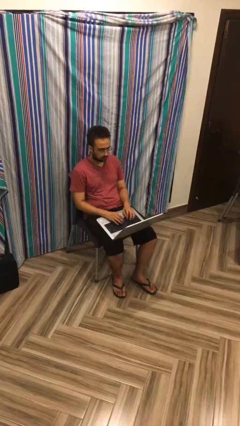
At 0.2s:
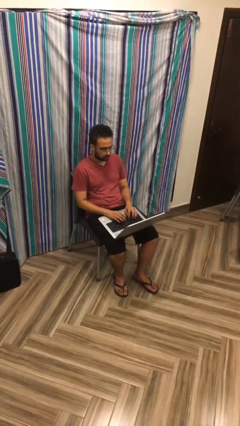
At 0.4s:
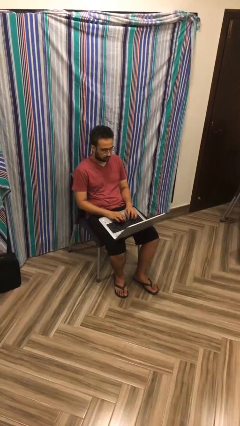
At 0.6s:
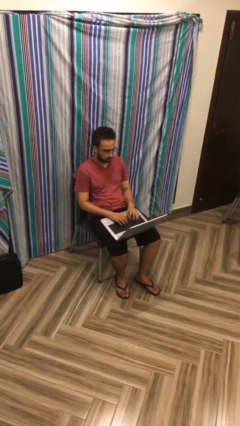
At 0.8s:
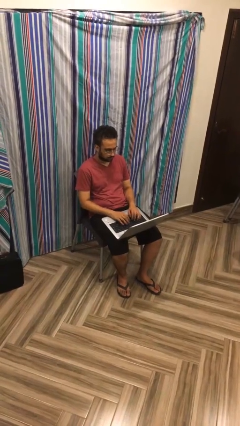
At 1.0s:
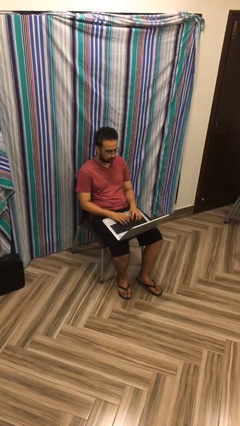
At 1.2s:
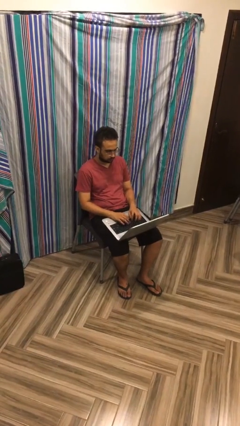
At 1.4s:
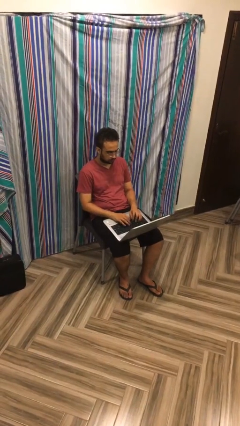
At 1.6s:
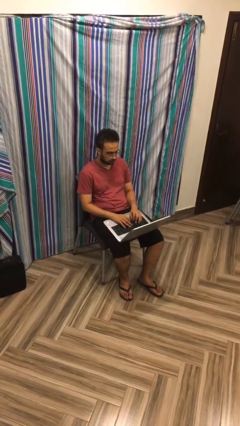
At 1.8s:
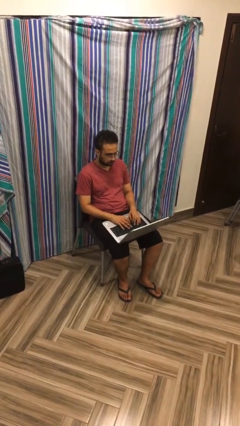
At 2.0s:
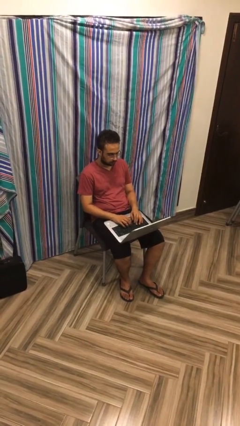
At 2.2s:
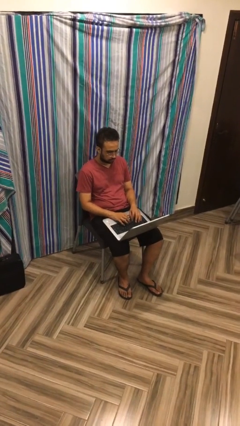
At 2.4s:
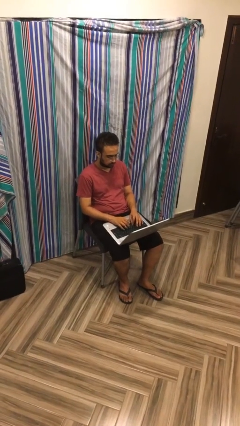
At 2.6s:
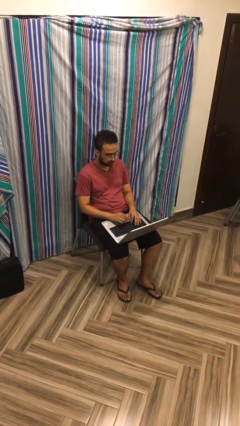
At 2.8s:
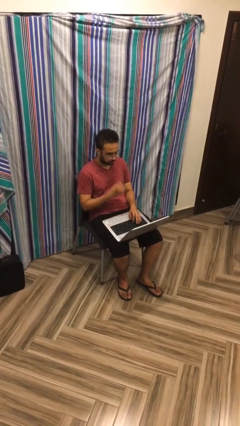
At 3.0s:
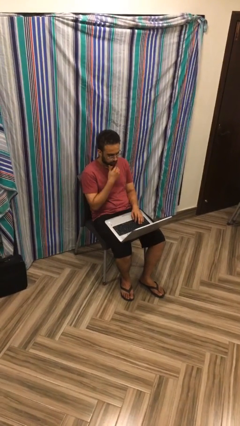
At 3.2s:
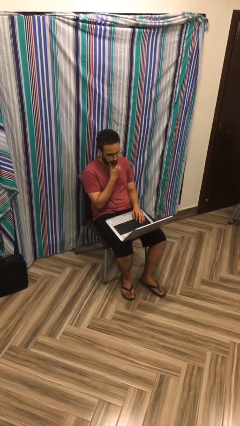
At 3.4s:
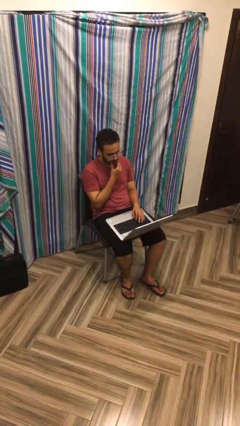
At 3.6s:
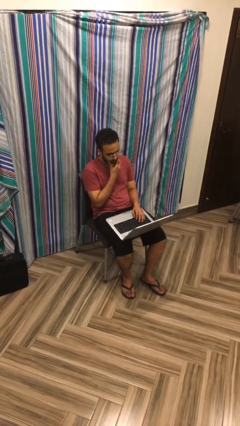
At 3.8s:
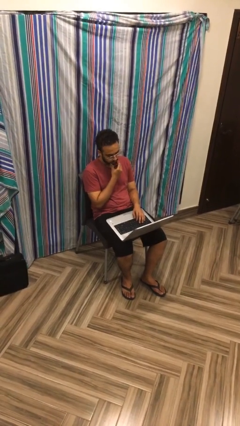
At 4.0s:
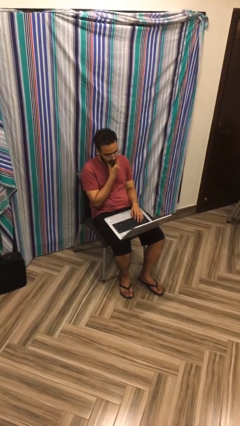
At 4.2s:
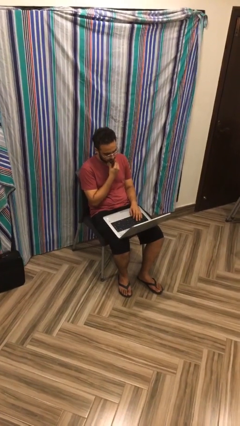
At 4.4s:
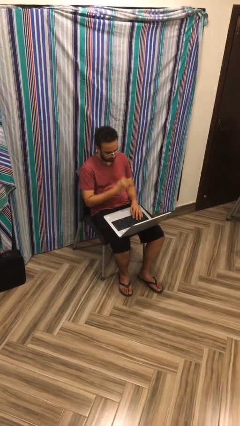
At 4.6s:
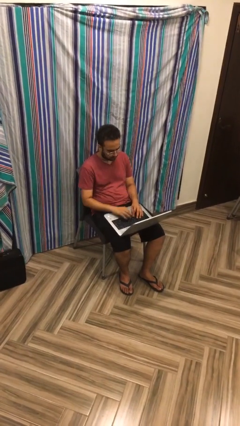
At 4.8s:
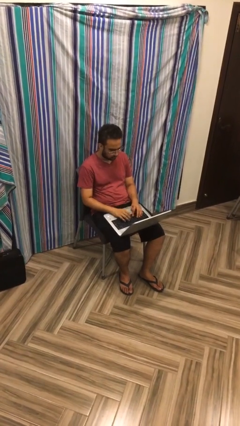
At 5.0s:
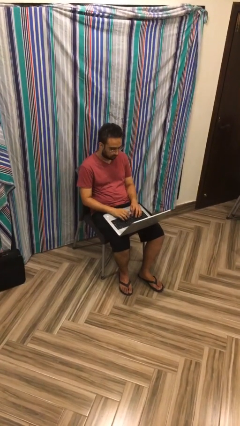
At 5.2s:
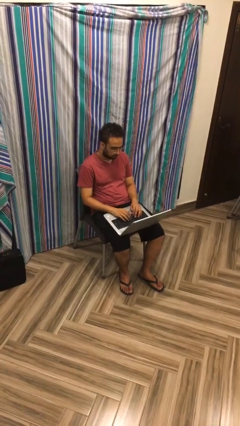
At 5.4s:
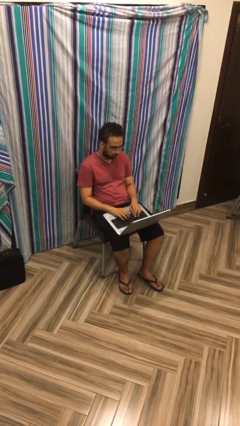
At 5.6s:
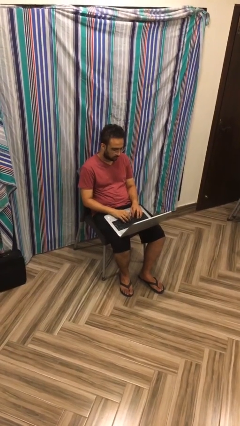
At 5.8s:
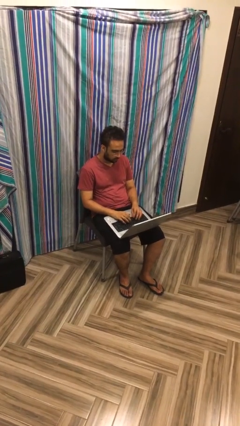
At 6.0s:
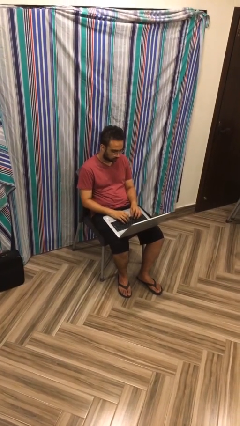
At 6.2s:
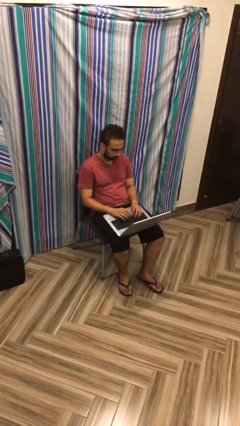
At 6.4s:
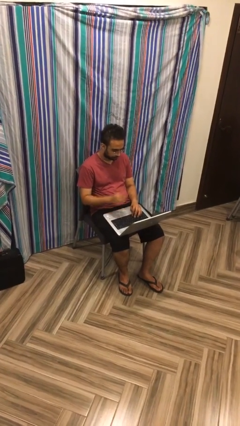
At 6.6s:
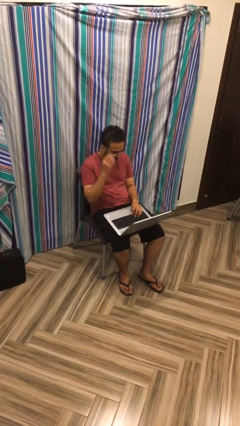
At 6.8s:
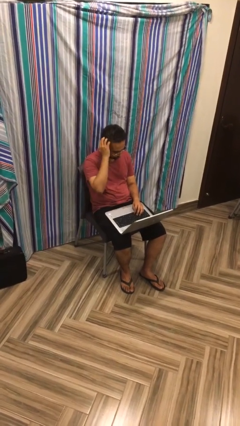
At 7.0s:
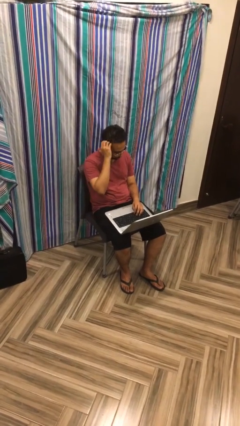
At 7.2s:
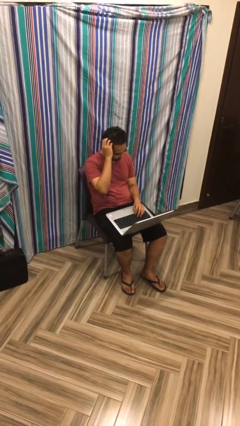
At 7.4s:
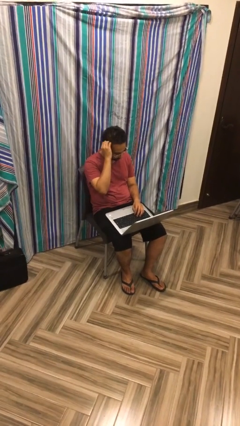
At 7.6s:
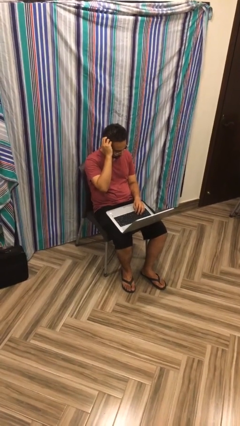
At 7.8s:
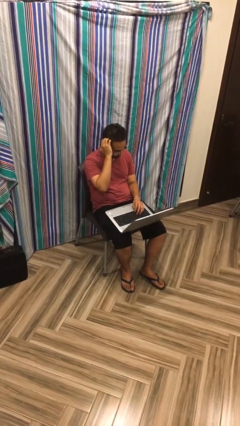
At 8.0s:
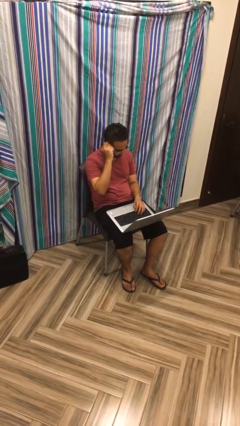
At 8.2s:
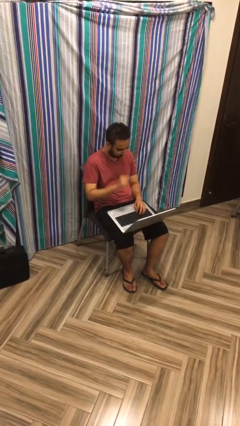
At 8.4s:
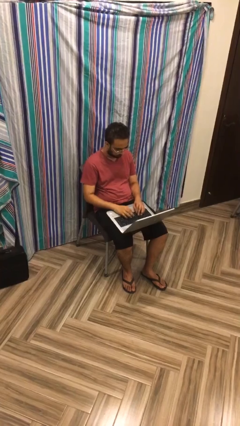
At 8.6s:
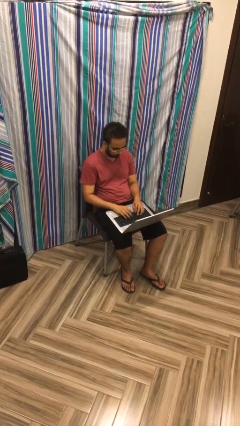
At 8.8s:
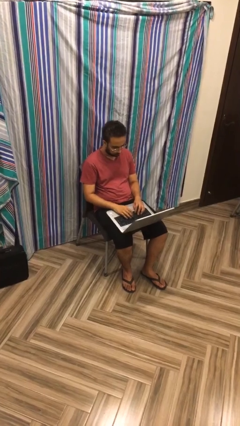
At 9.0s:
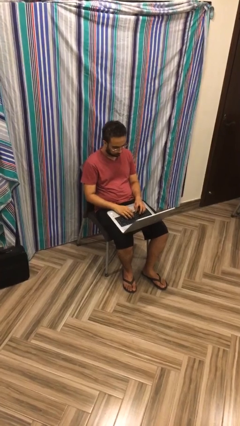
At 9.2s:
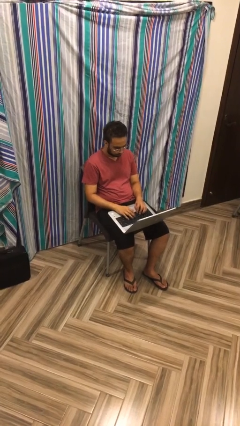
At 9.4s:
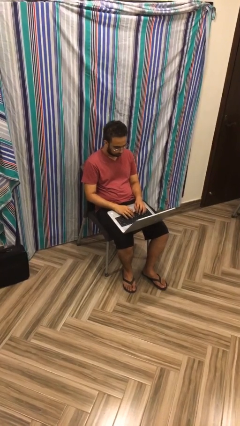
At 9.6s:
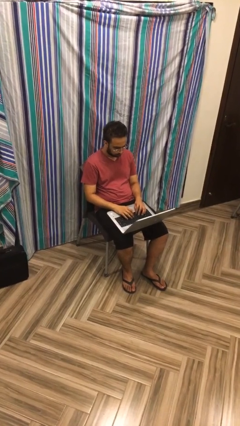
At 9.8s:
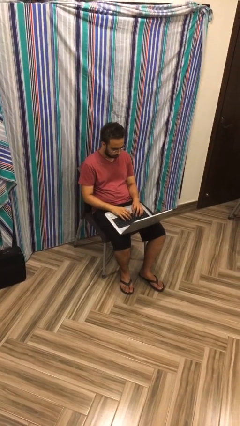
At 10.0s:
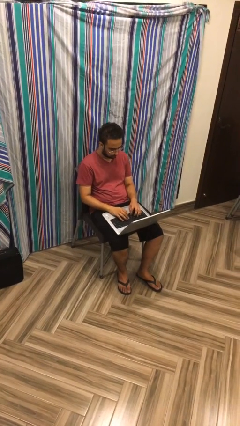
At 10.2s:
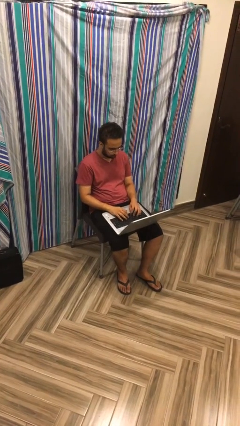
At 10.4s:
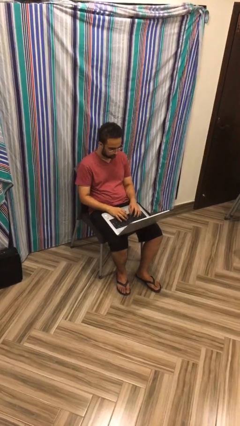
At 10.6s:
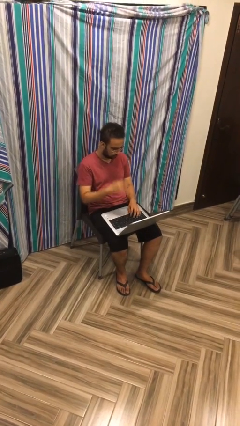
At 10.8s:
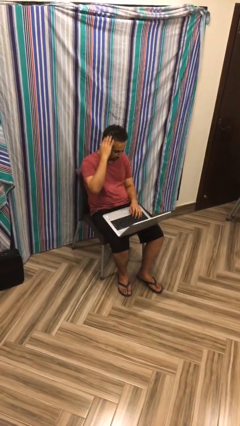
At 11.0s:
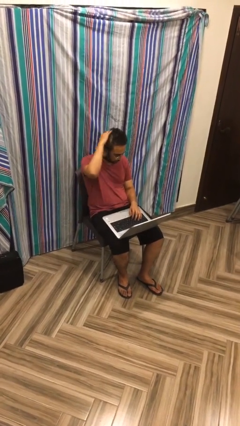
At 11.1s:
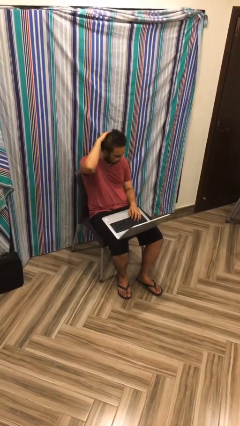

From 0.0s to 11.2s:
person interacts with laptop

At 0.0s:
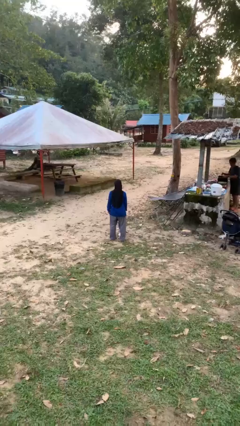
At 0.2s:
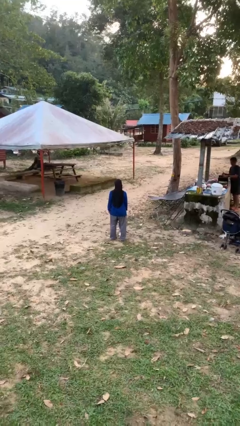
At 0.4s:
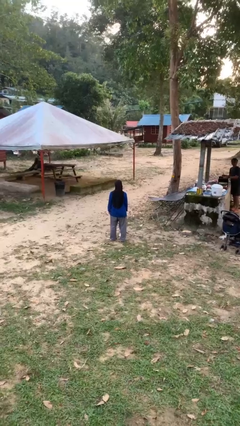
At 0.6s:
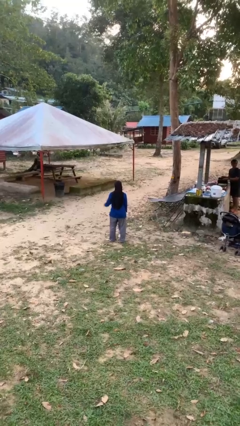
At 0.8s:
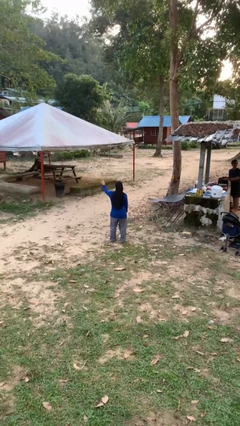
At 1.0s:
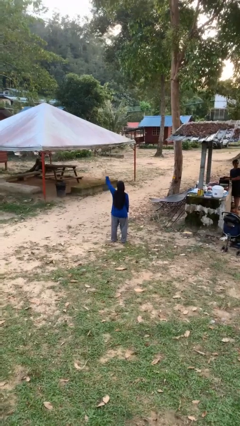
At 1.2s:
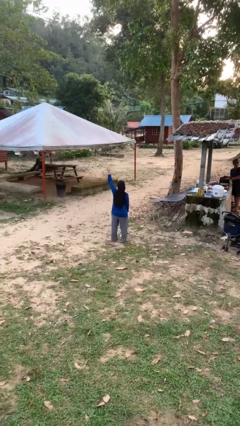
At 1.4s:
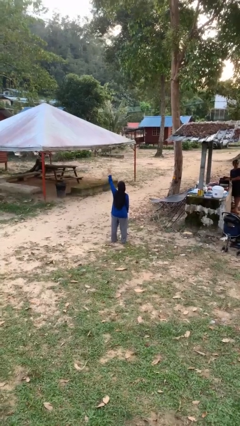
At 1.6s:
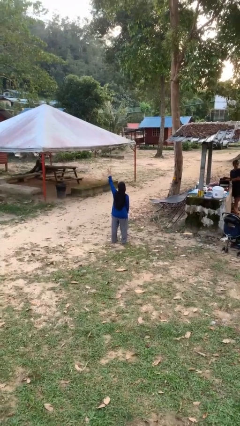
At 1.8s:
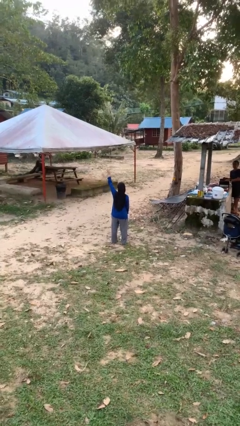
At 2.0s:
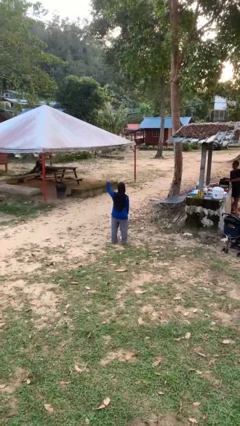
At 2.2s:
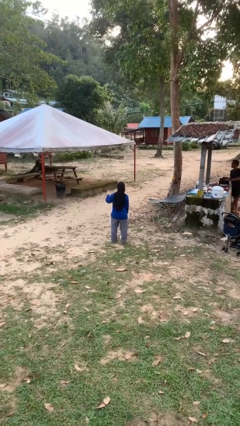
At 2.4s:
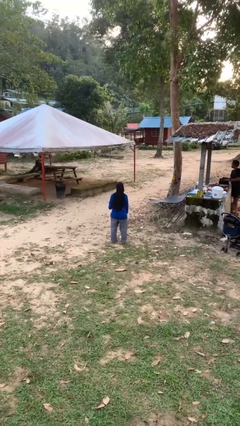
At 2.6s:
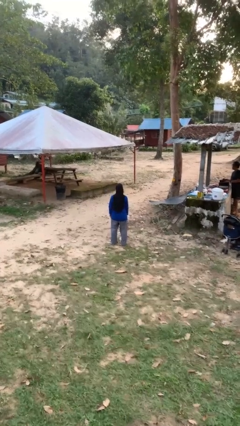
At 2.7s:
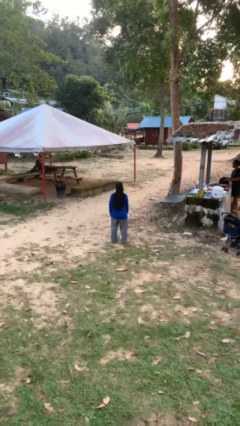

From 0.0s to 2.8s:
person gestures number four

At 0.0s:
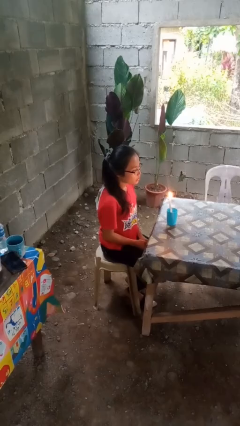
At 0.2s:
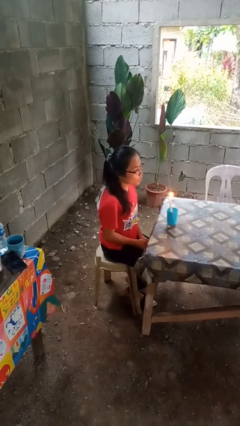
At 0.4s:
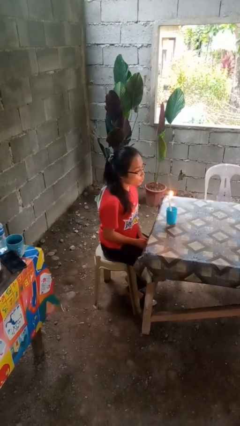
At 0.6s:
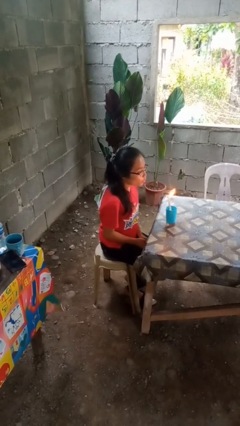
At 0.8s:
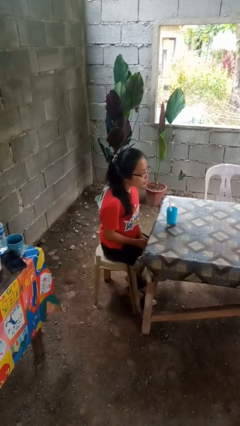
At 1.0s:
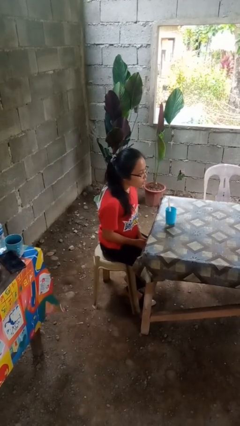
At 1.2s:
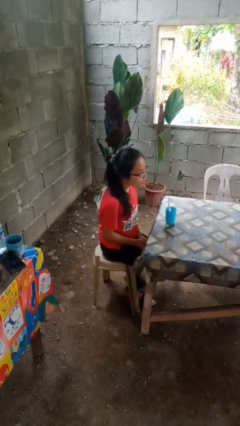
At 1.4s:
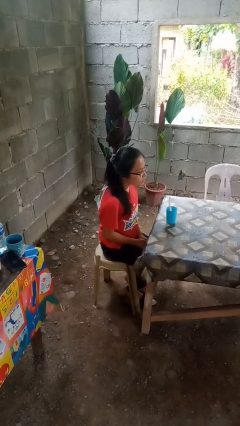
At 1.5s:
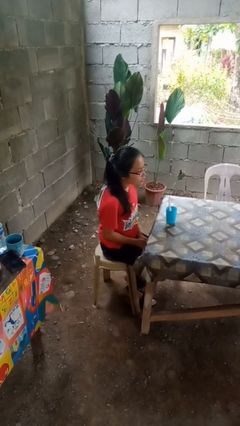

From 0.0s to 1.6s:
person extinguishes candle

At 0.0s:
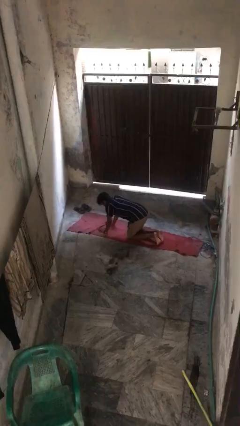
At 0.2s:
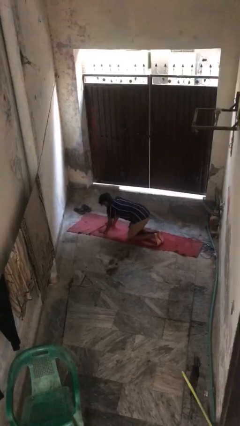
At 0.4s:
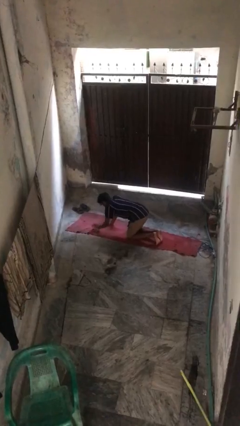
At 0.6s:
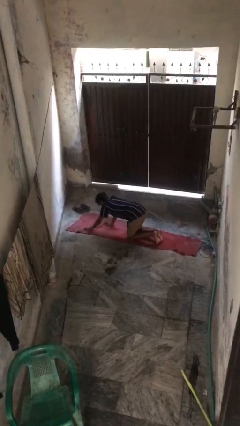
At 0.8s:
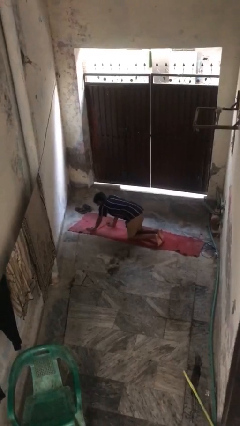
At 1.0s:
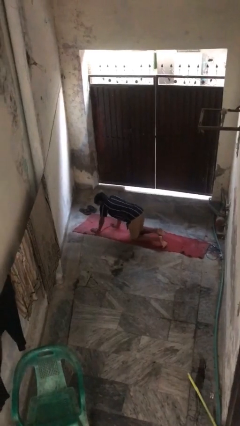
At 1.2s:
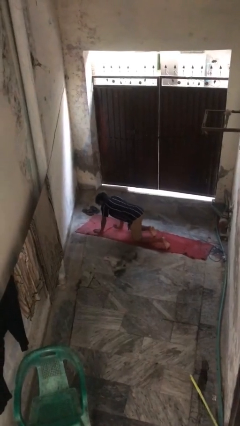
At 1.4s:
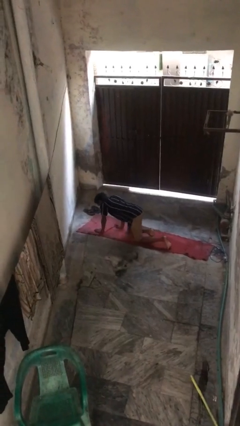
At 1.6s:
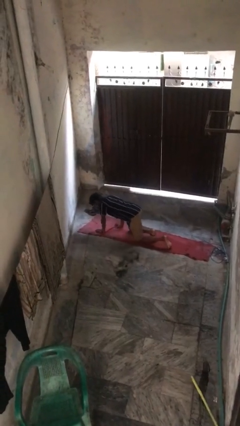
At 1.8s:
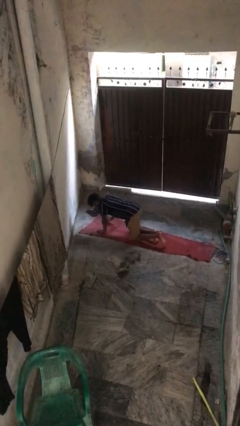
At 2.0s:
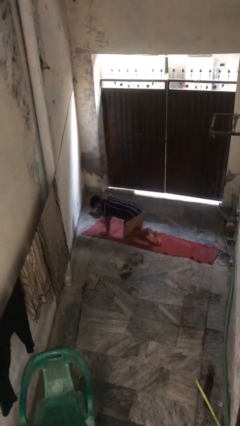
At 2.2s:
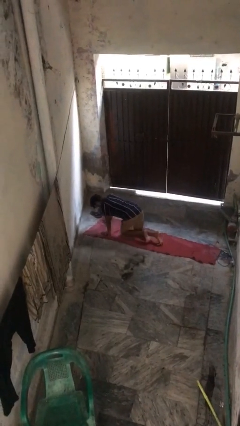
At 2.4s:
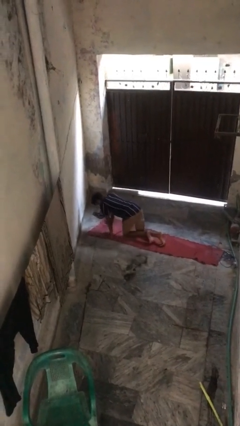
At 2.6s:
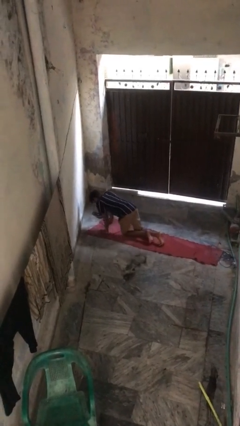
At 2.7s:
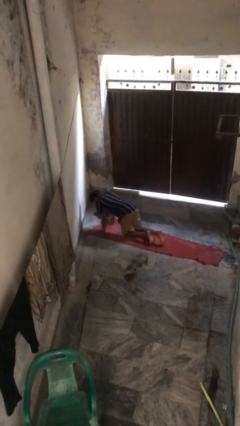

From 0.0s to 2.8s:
person crawls
